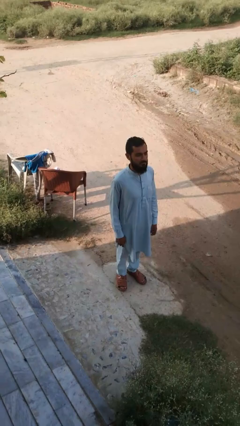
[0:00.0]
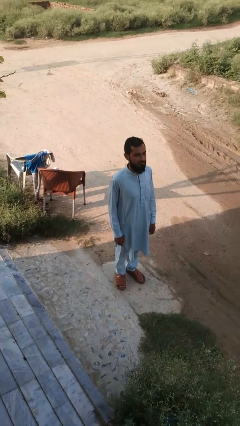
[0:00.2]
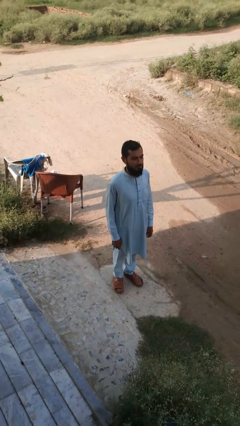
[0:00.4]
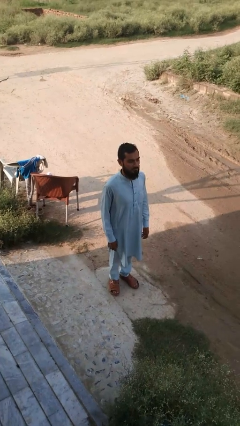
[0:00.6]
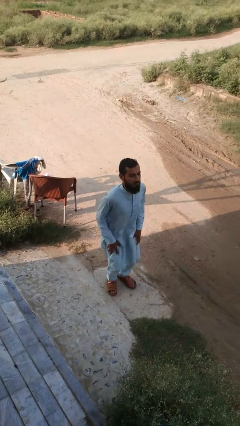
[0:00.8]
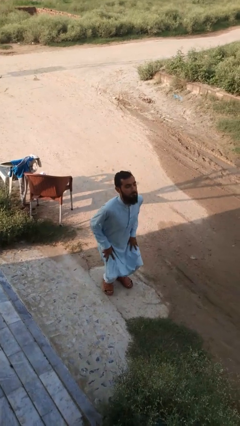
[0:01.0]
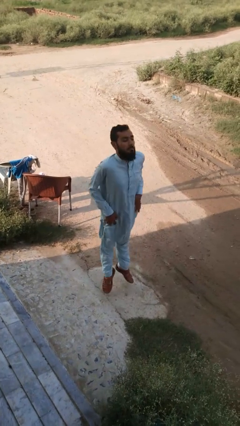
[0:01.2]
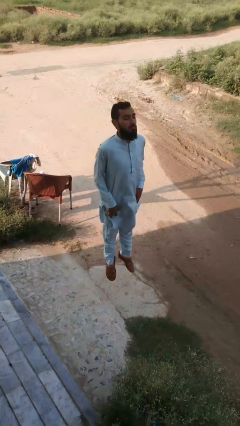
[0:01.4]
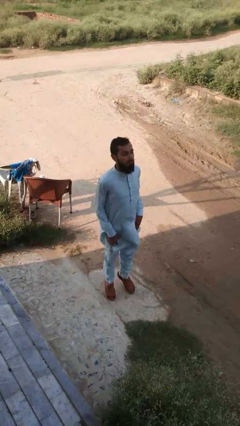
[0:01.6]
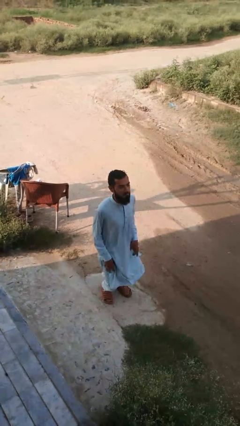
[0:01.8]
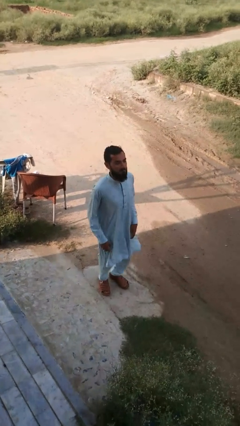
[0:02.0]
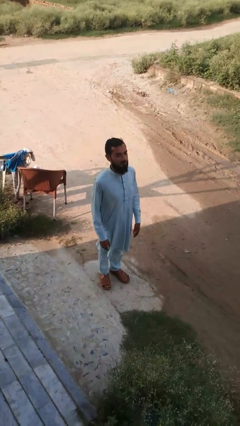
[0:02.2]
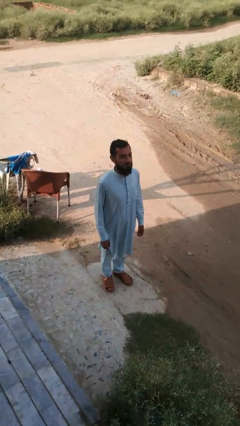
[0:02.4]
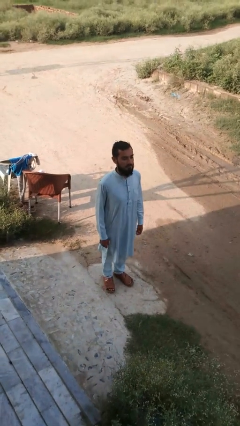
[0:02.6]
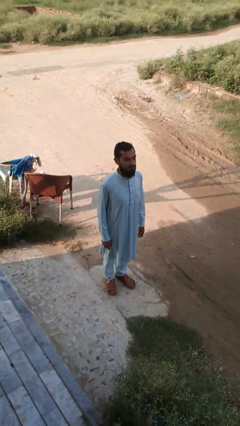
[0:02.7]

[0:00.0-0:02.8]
person jumps

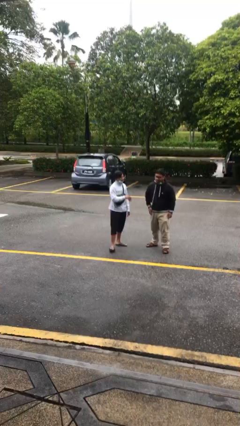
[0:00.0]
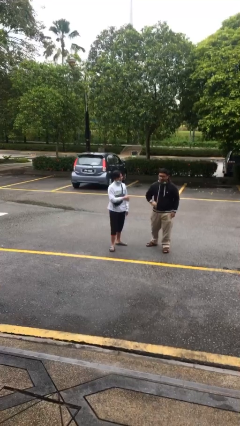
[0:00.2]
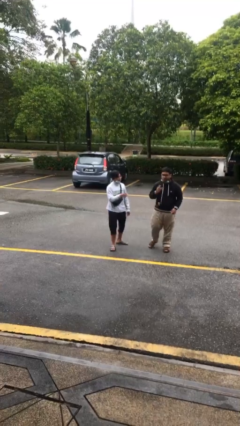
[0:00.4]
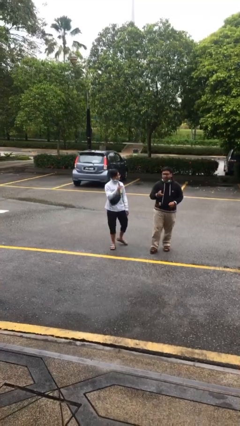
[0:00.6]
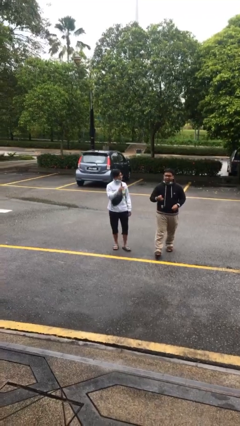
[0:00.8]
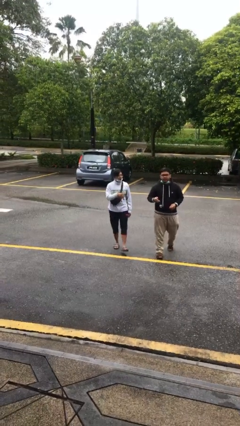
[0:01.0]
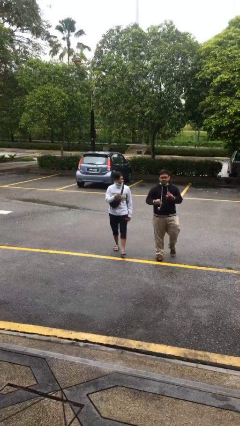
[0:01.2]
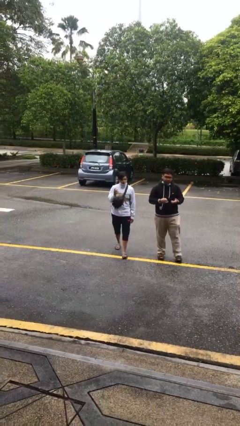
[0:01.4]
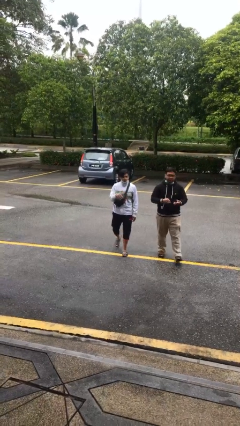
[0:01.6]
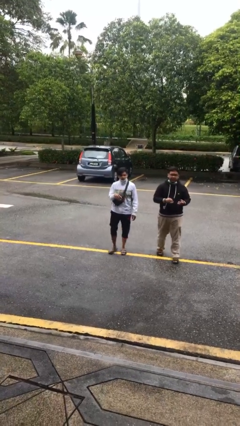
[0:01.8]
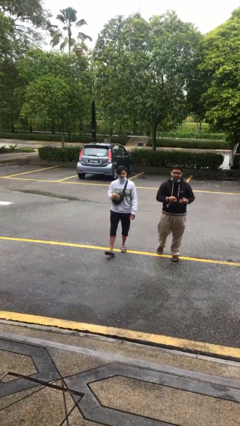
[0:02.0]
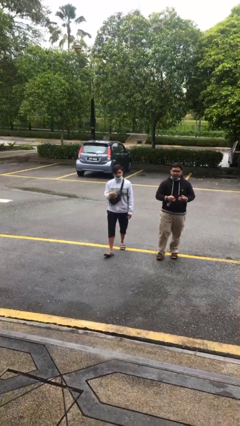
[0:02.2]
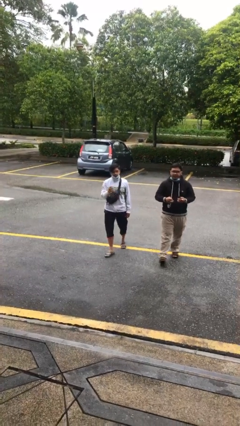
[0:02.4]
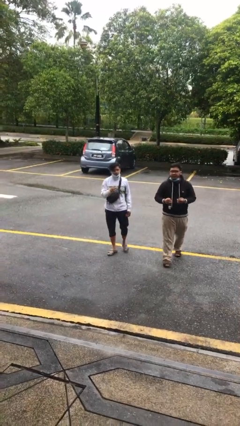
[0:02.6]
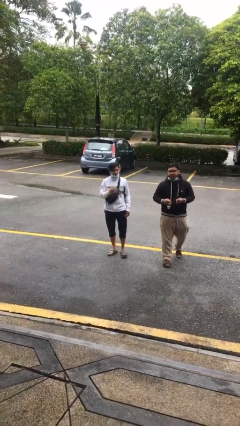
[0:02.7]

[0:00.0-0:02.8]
person talks to person

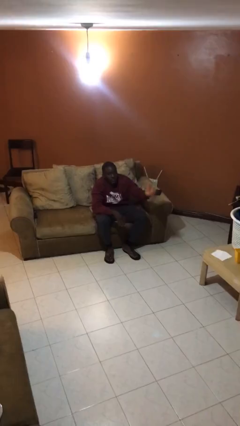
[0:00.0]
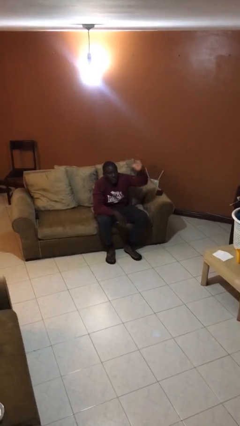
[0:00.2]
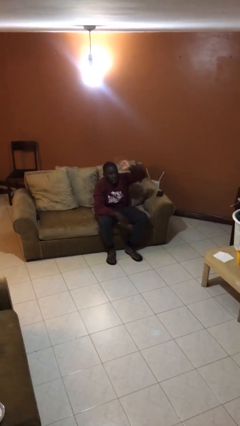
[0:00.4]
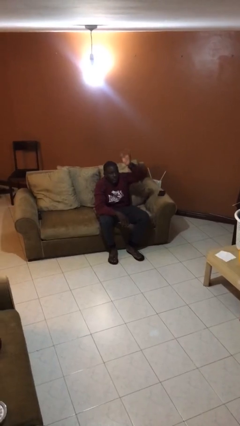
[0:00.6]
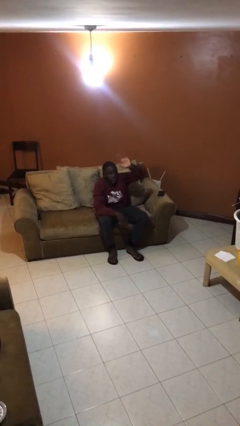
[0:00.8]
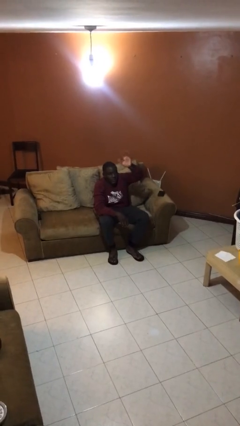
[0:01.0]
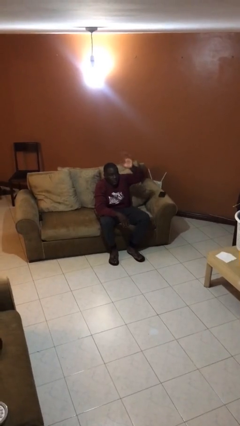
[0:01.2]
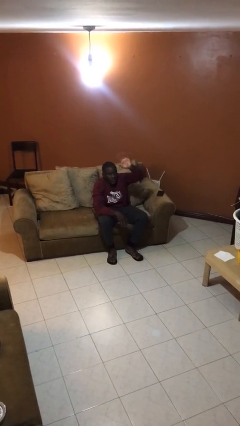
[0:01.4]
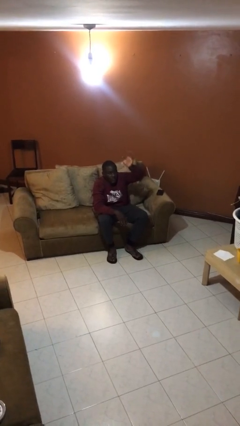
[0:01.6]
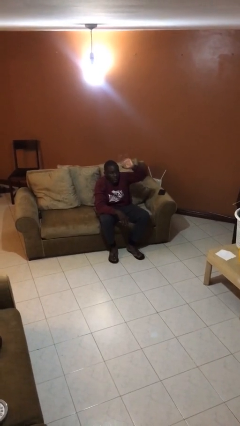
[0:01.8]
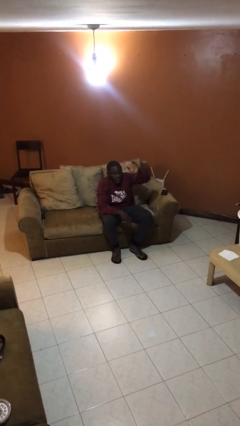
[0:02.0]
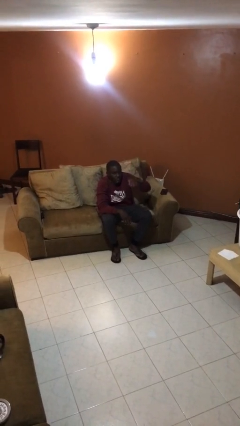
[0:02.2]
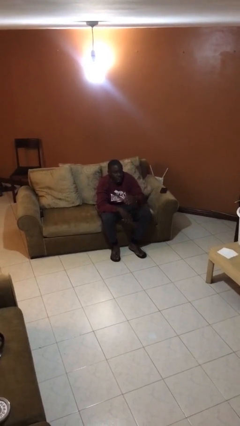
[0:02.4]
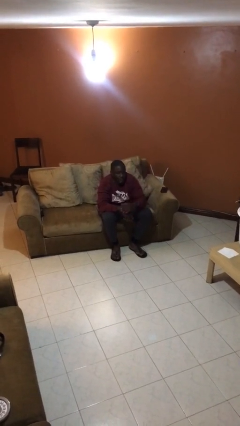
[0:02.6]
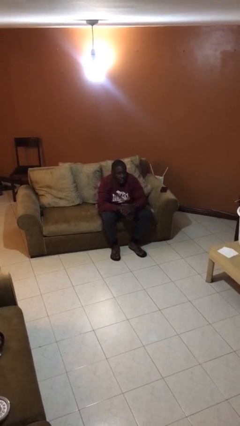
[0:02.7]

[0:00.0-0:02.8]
person waves at person

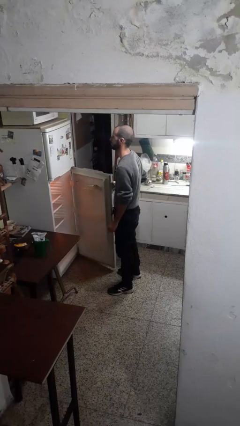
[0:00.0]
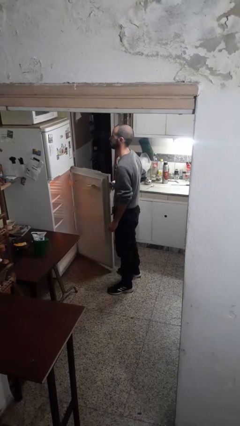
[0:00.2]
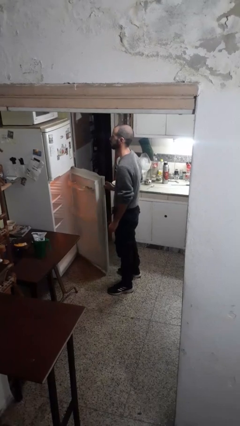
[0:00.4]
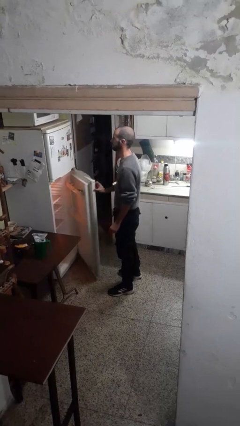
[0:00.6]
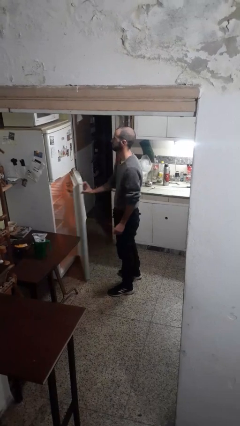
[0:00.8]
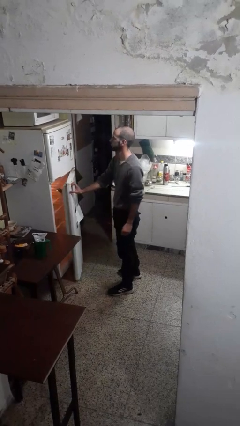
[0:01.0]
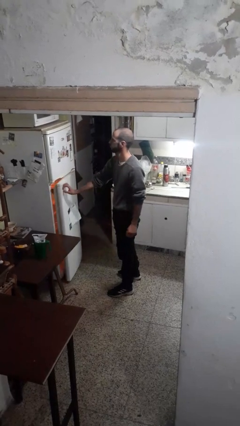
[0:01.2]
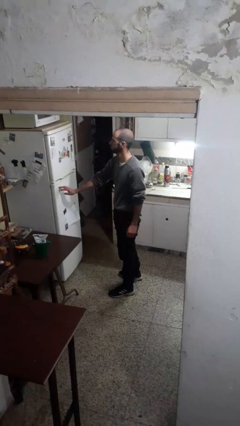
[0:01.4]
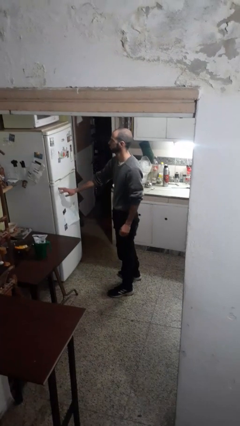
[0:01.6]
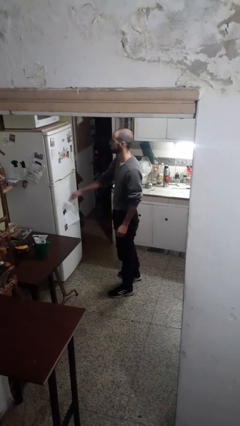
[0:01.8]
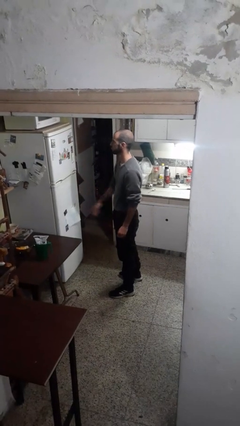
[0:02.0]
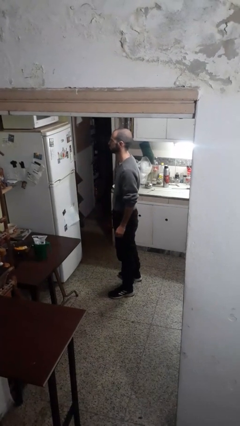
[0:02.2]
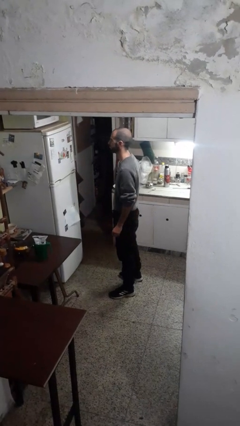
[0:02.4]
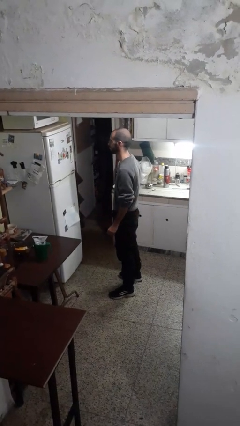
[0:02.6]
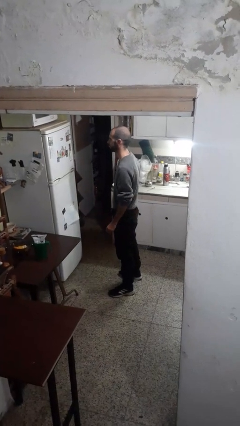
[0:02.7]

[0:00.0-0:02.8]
person closes refrigerator

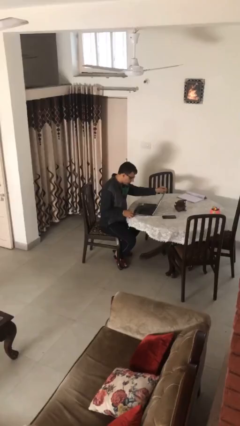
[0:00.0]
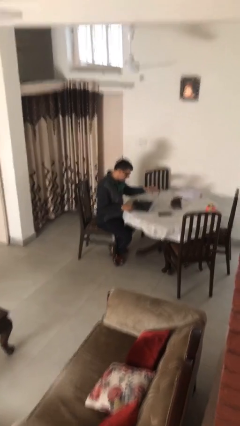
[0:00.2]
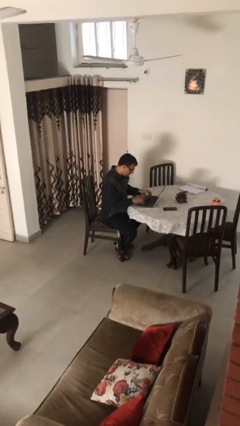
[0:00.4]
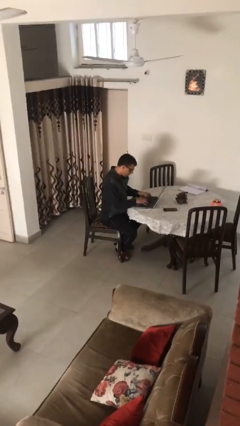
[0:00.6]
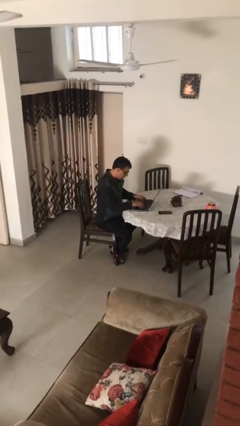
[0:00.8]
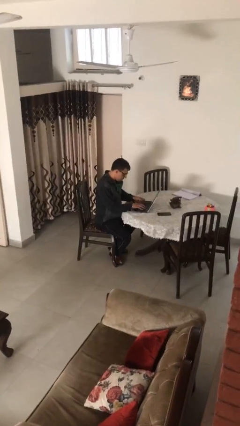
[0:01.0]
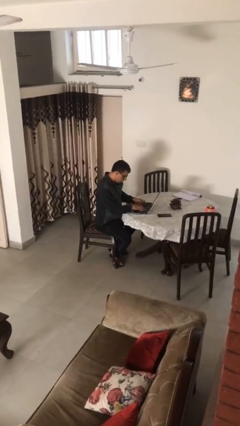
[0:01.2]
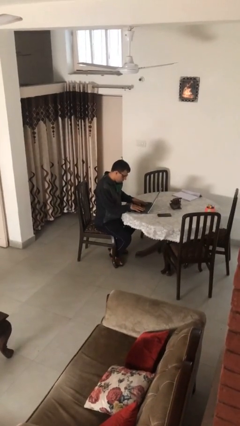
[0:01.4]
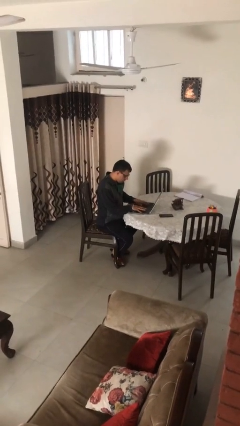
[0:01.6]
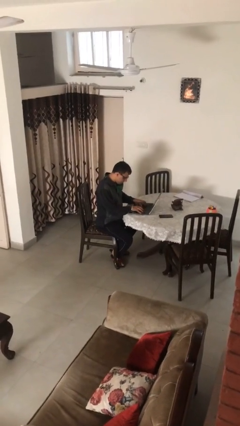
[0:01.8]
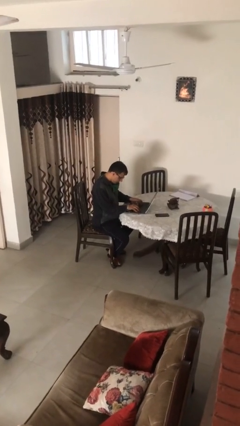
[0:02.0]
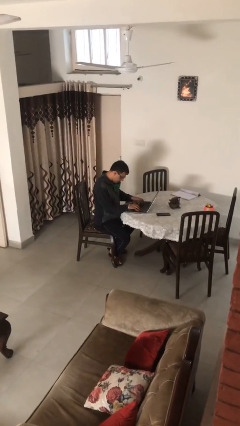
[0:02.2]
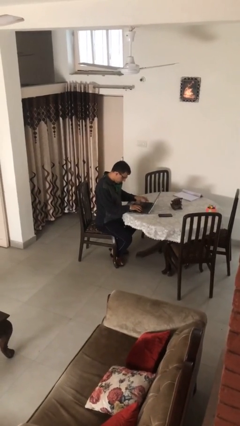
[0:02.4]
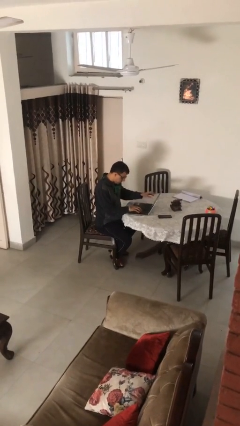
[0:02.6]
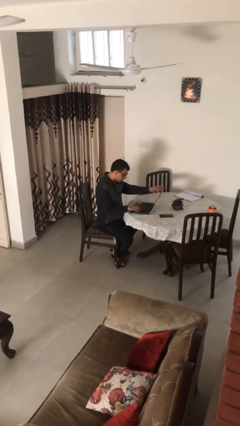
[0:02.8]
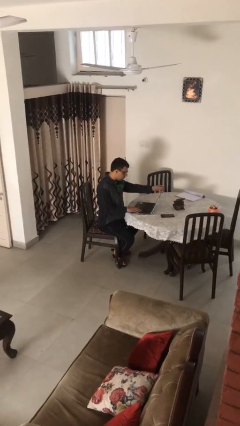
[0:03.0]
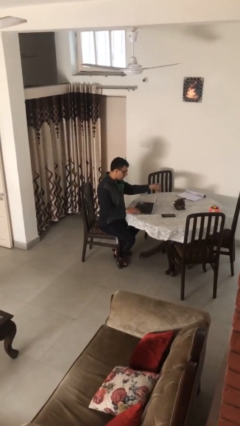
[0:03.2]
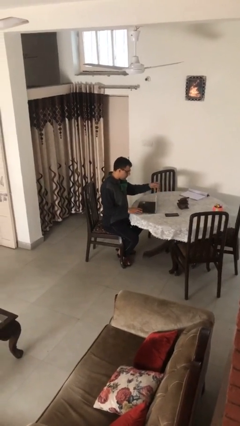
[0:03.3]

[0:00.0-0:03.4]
person interacts with laptop

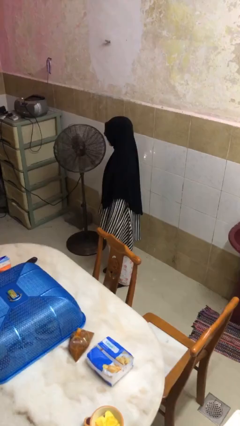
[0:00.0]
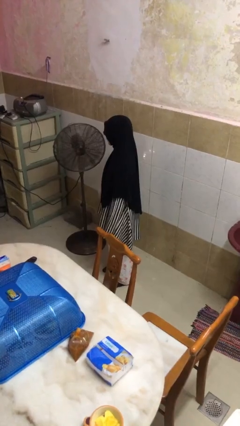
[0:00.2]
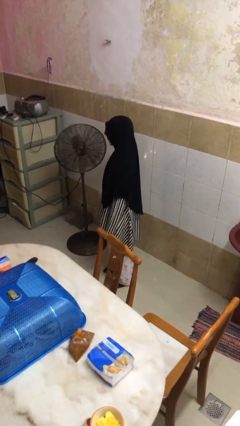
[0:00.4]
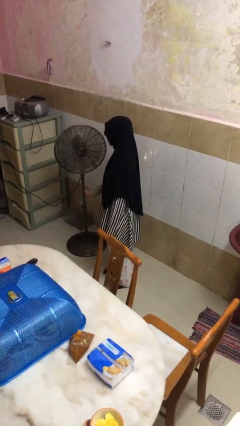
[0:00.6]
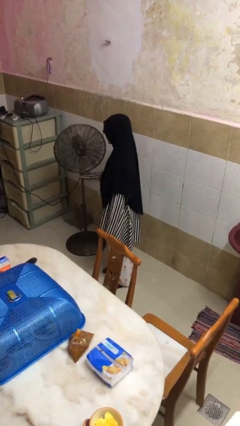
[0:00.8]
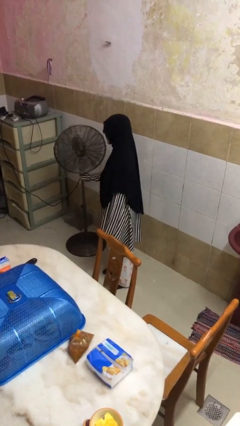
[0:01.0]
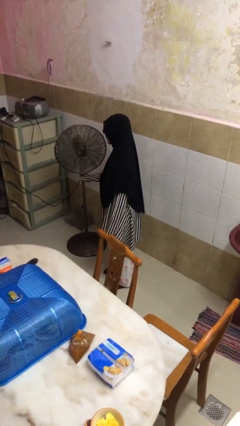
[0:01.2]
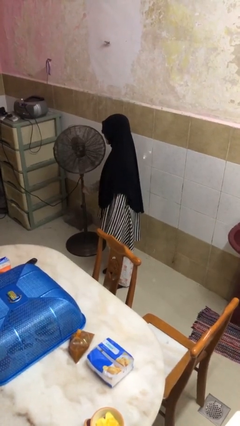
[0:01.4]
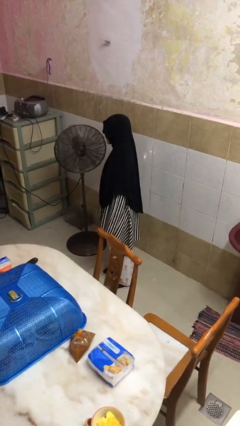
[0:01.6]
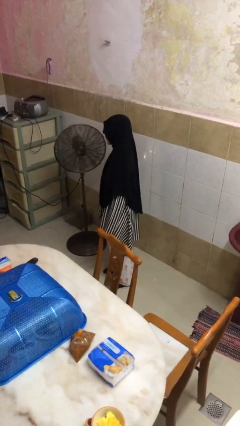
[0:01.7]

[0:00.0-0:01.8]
person turns off fan

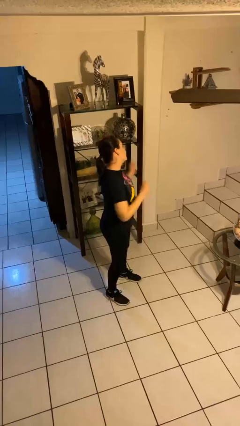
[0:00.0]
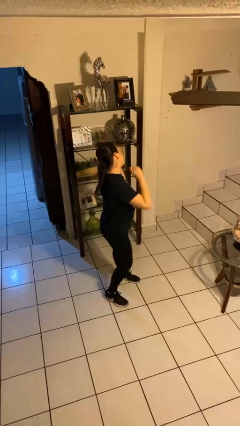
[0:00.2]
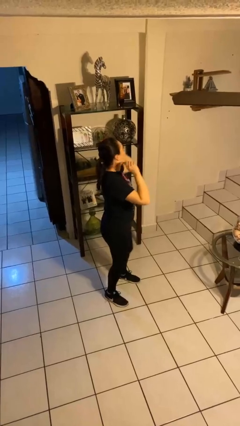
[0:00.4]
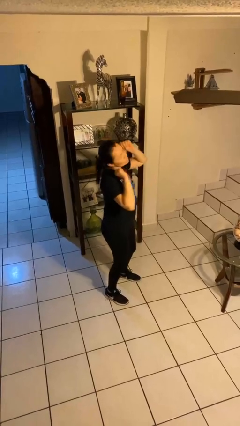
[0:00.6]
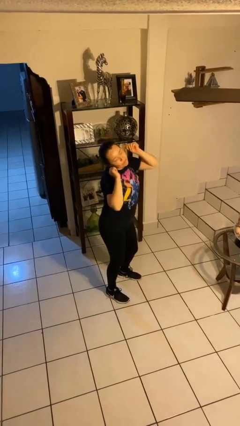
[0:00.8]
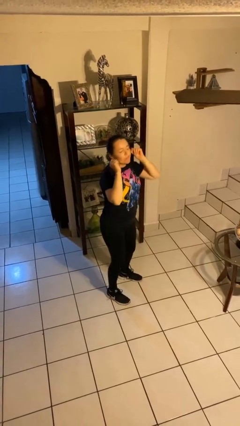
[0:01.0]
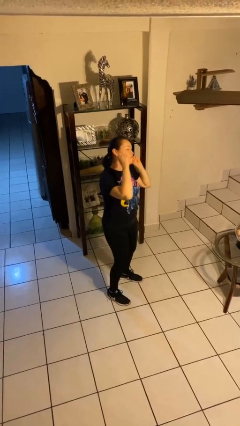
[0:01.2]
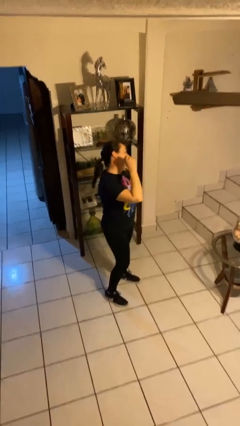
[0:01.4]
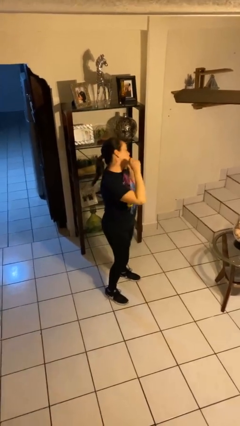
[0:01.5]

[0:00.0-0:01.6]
person dances in place
